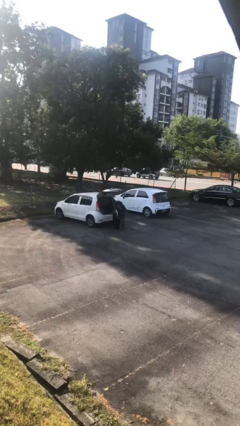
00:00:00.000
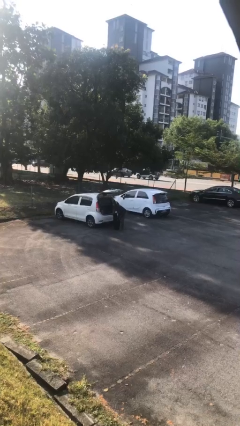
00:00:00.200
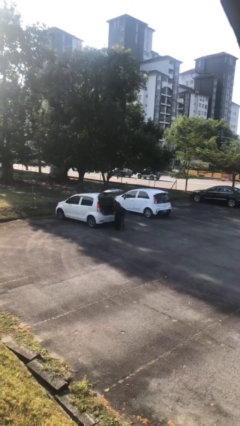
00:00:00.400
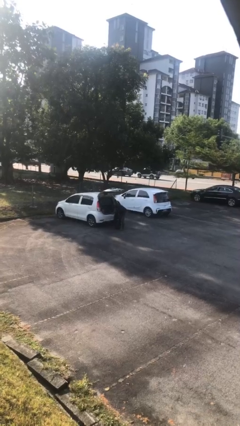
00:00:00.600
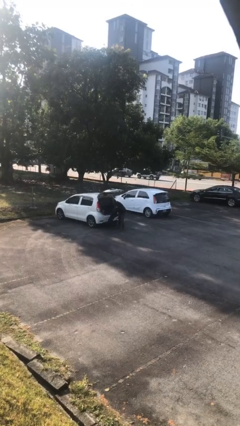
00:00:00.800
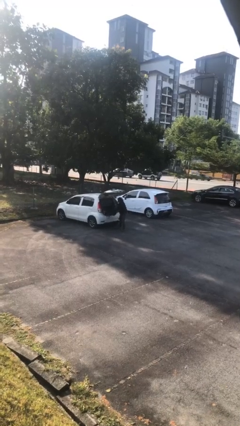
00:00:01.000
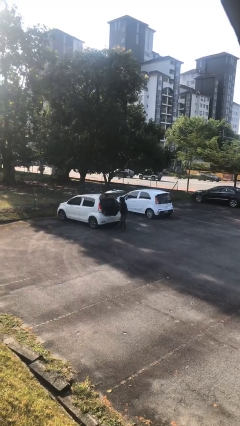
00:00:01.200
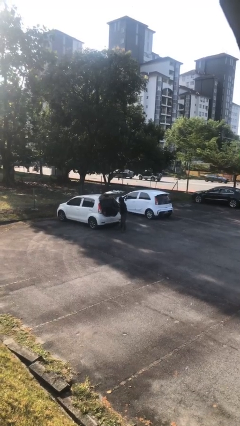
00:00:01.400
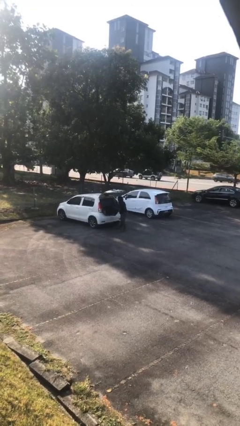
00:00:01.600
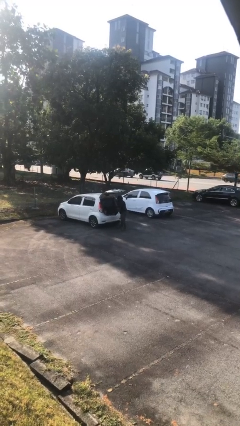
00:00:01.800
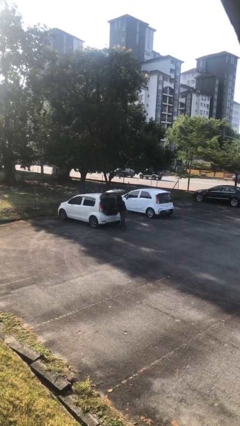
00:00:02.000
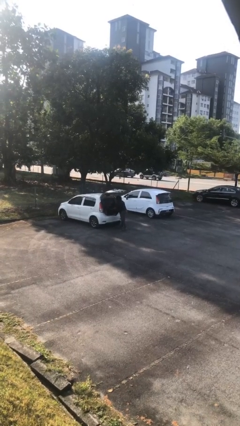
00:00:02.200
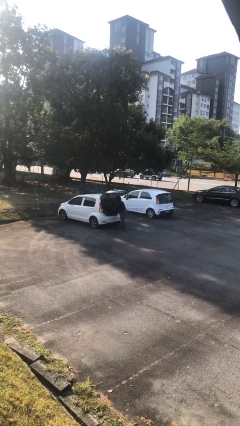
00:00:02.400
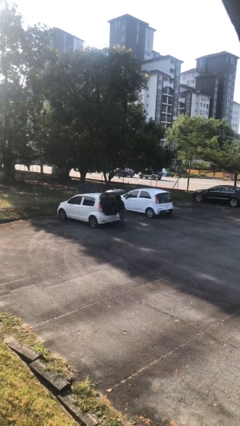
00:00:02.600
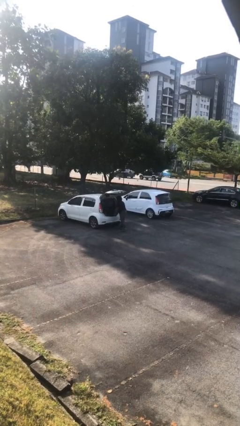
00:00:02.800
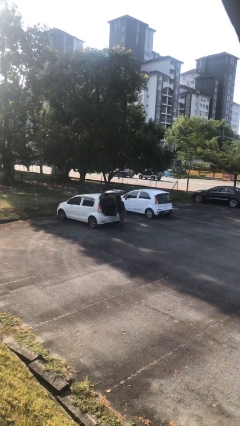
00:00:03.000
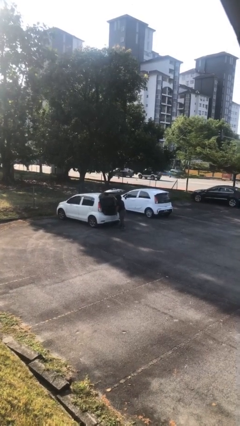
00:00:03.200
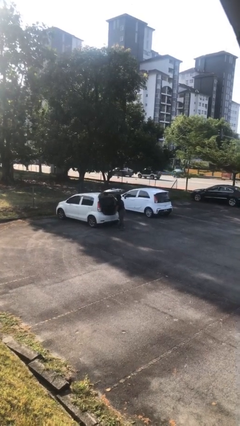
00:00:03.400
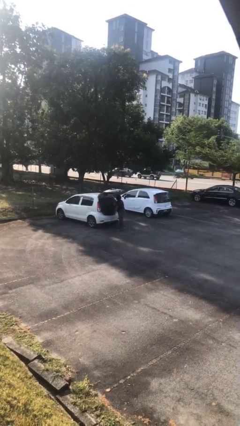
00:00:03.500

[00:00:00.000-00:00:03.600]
person loads car

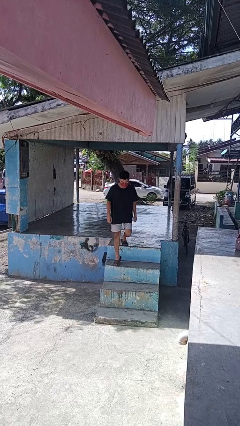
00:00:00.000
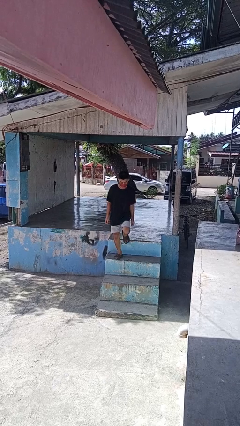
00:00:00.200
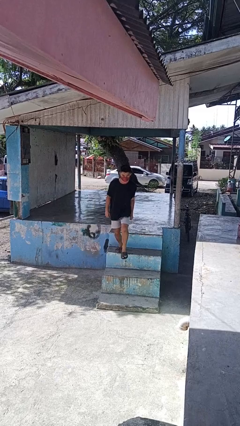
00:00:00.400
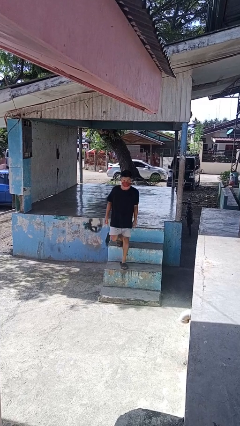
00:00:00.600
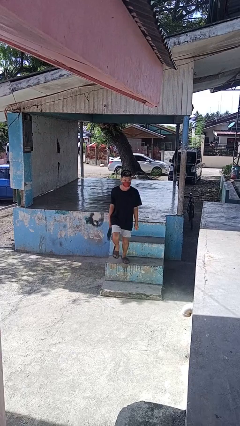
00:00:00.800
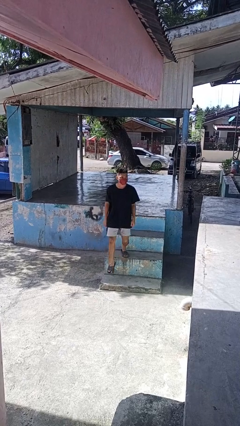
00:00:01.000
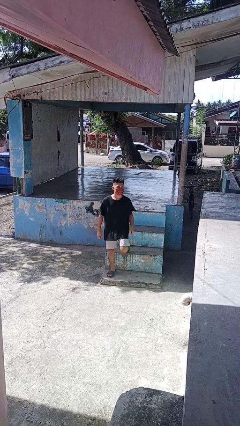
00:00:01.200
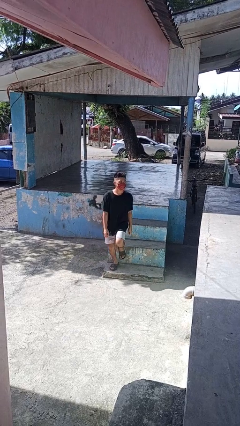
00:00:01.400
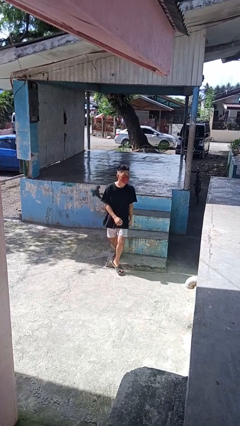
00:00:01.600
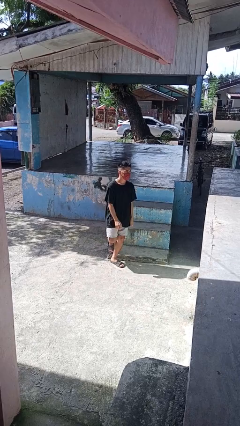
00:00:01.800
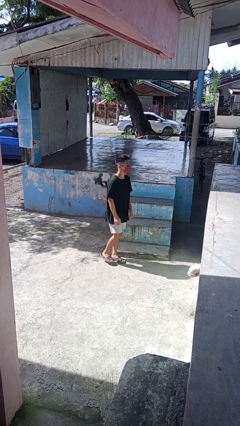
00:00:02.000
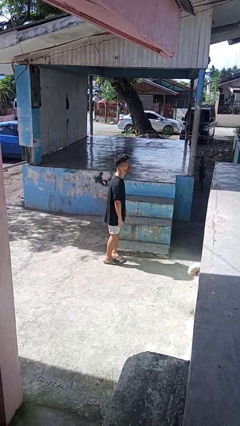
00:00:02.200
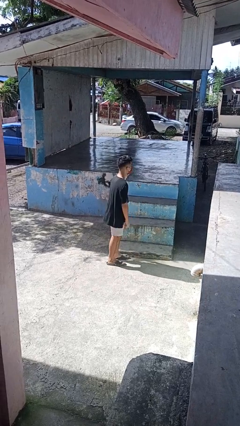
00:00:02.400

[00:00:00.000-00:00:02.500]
person climbs down stairs

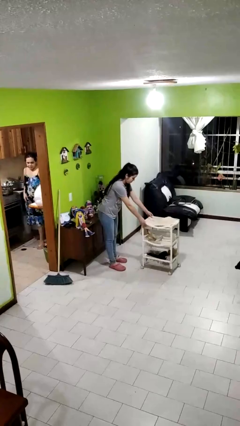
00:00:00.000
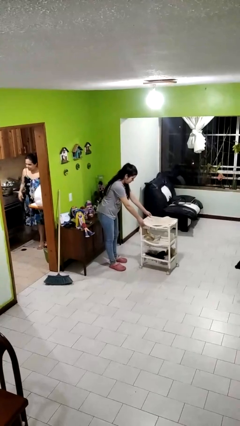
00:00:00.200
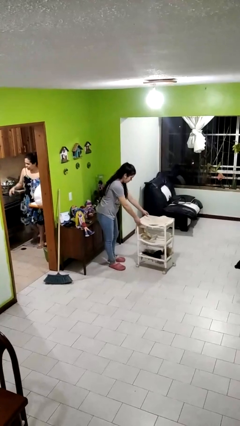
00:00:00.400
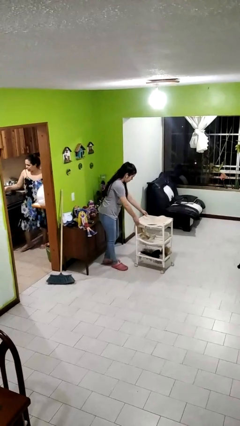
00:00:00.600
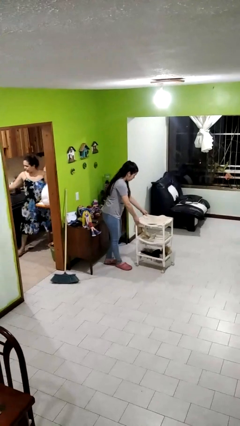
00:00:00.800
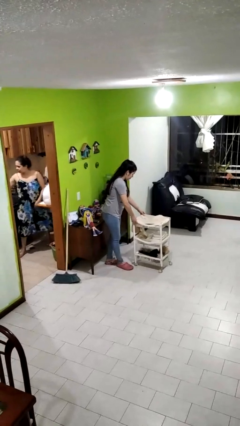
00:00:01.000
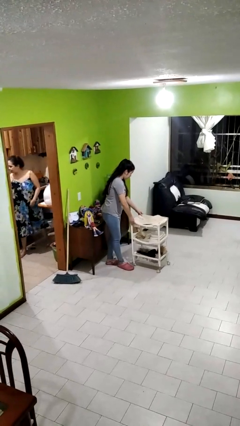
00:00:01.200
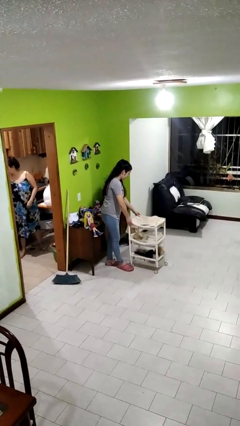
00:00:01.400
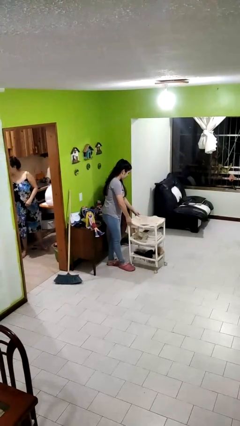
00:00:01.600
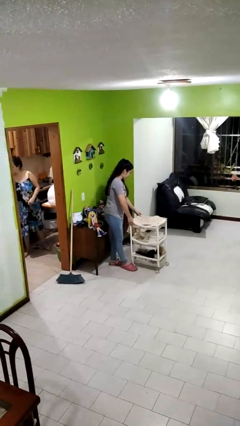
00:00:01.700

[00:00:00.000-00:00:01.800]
person pulls wheeled cart

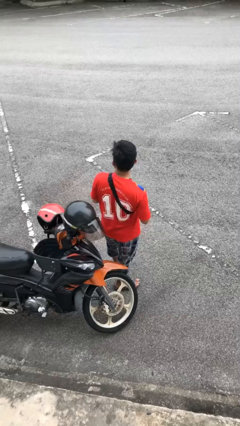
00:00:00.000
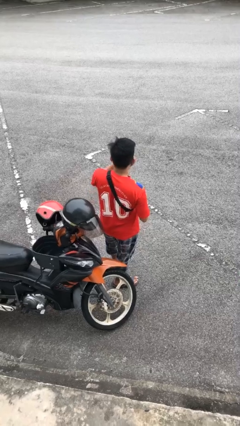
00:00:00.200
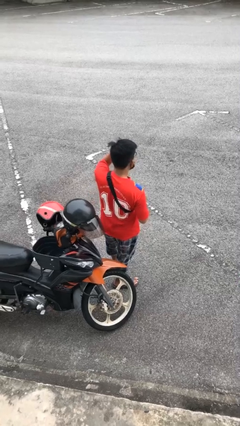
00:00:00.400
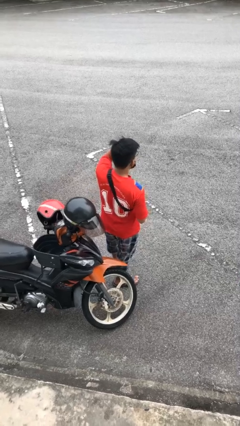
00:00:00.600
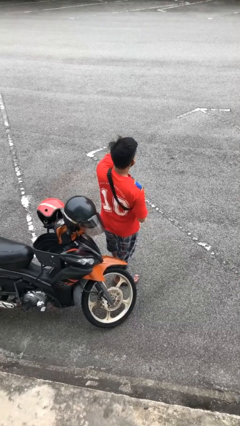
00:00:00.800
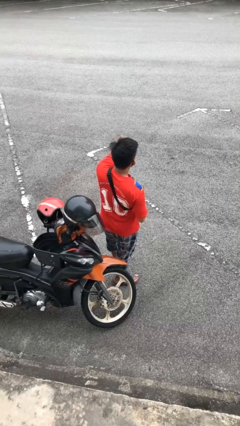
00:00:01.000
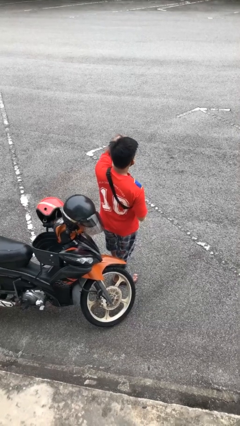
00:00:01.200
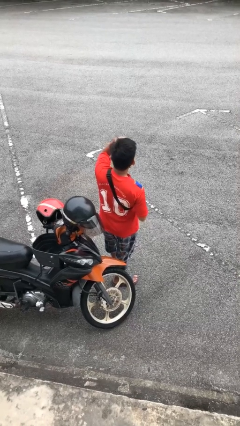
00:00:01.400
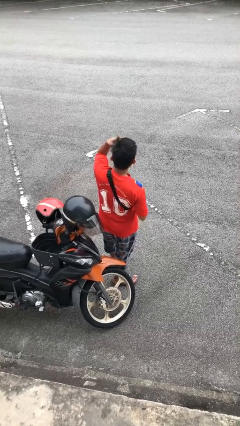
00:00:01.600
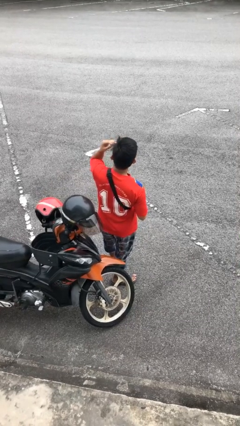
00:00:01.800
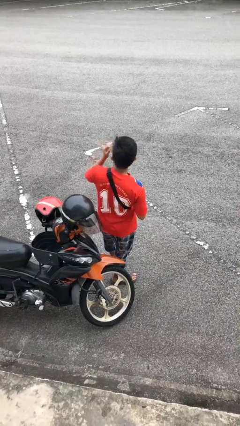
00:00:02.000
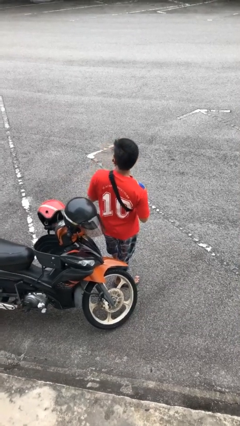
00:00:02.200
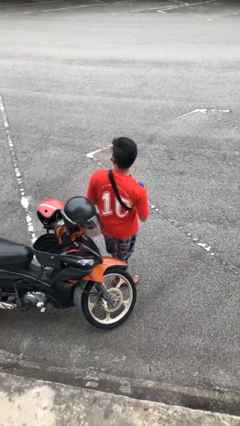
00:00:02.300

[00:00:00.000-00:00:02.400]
person scratches face

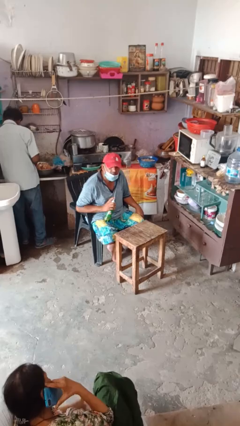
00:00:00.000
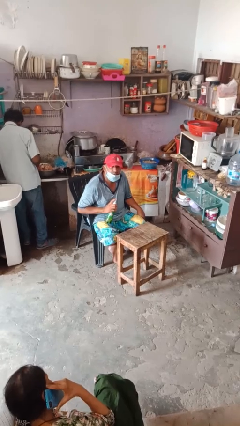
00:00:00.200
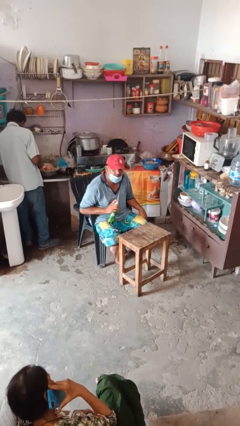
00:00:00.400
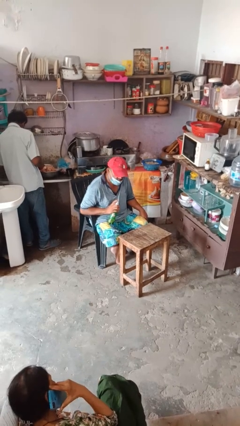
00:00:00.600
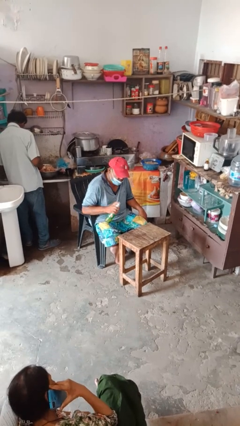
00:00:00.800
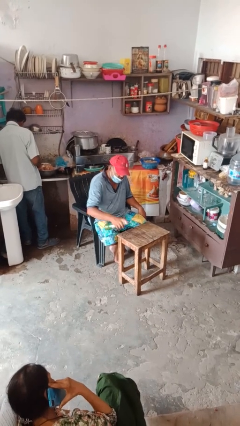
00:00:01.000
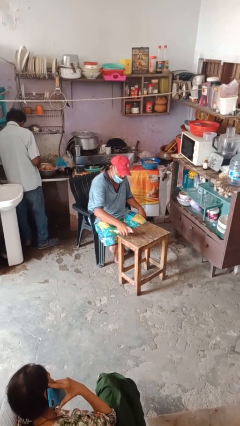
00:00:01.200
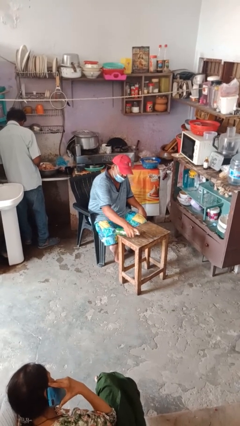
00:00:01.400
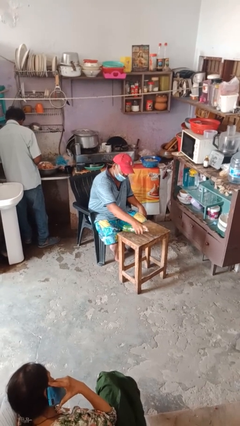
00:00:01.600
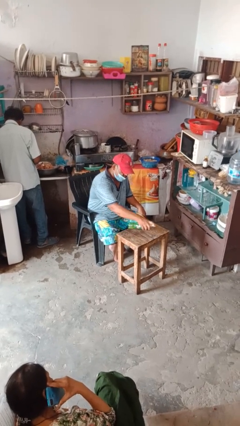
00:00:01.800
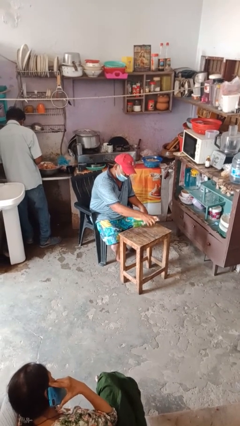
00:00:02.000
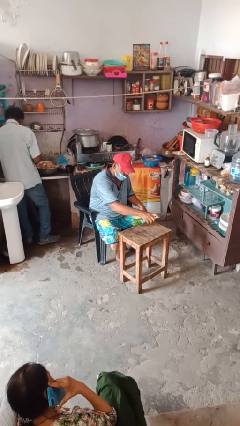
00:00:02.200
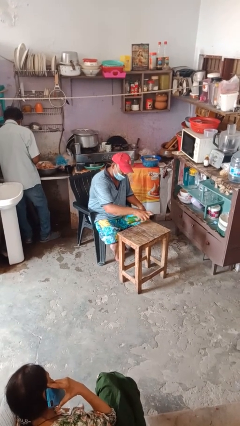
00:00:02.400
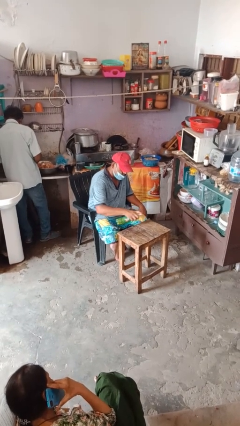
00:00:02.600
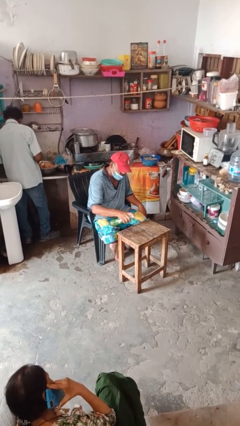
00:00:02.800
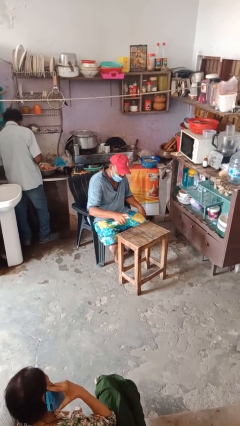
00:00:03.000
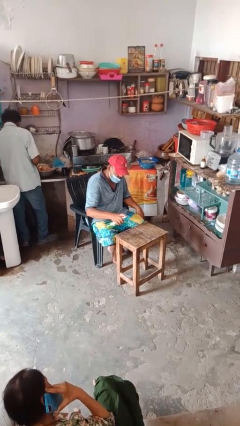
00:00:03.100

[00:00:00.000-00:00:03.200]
person sprays from bottle

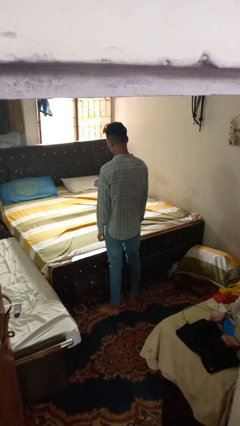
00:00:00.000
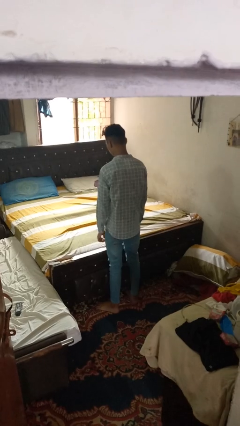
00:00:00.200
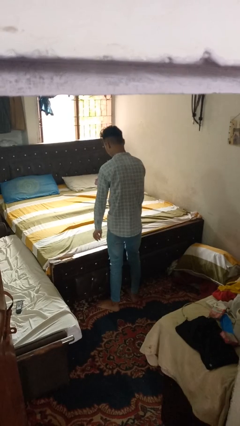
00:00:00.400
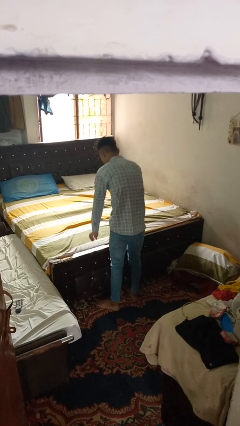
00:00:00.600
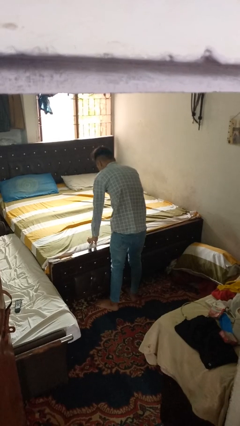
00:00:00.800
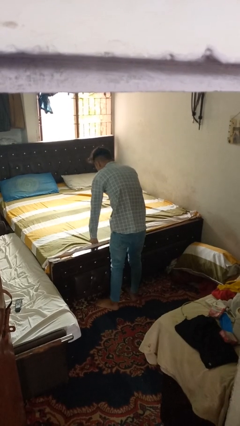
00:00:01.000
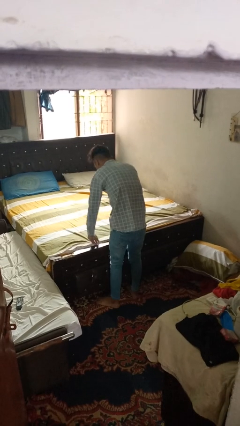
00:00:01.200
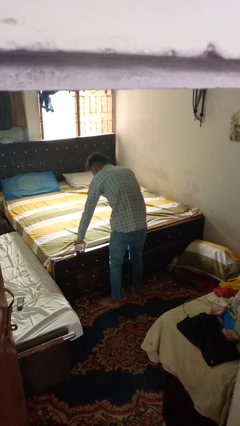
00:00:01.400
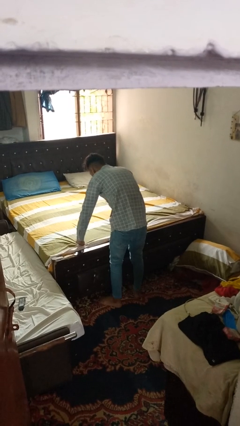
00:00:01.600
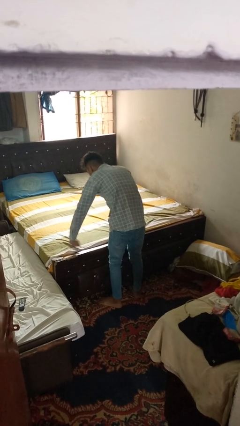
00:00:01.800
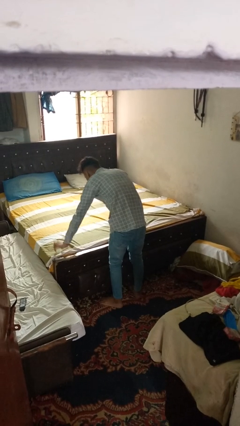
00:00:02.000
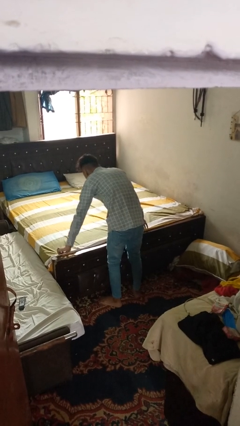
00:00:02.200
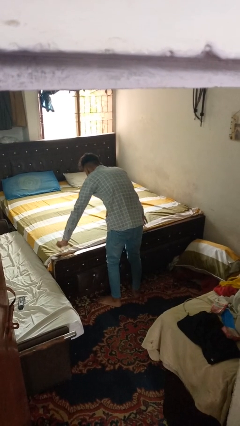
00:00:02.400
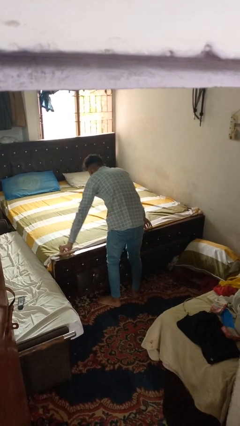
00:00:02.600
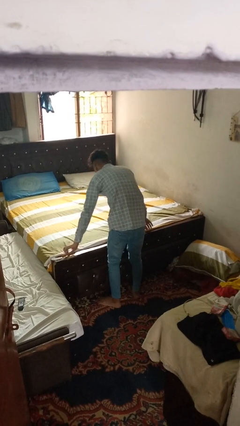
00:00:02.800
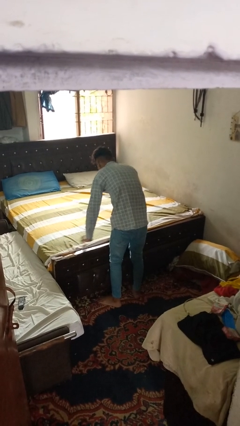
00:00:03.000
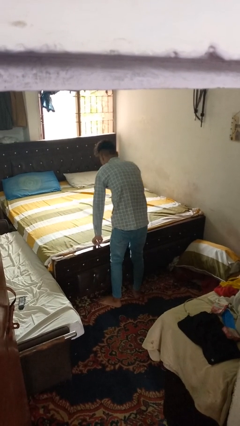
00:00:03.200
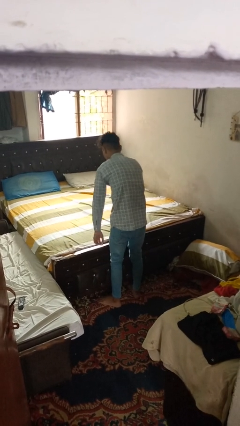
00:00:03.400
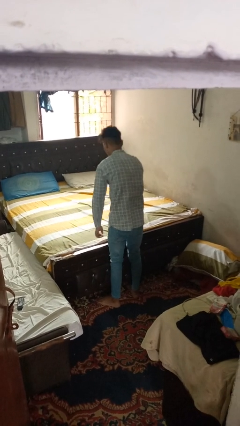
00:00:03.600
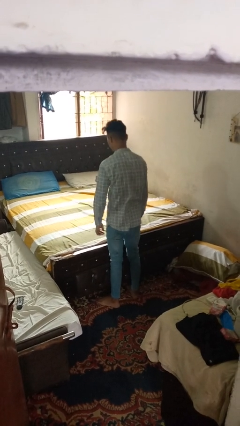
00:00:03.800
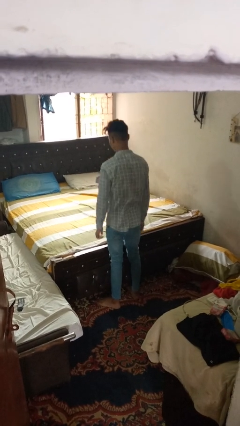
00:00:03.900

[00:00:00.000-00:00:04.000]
person makes bed
